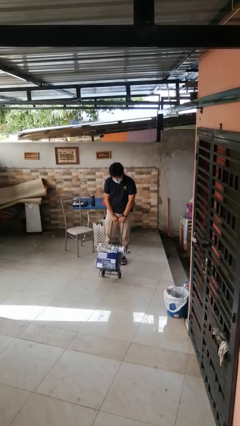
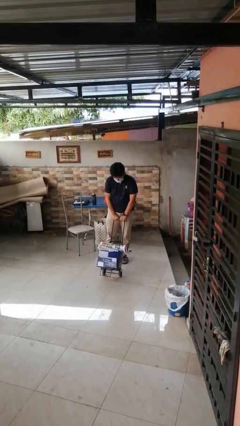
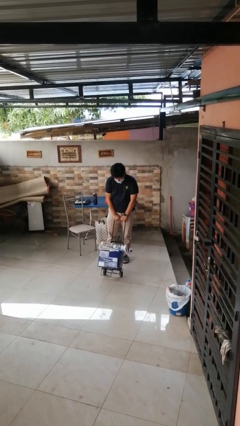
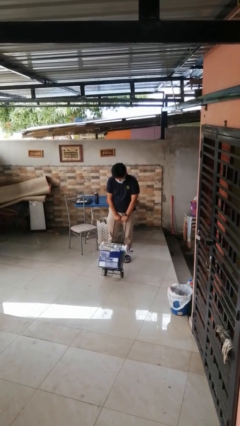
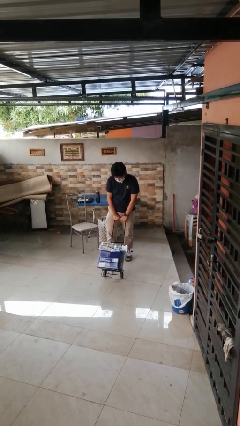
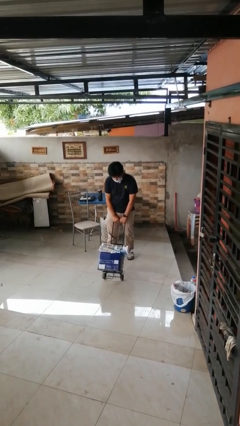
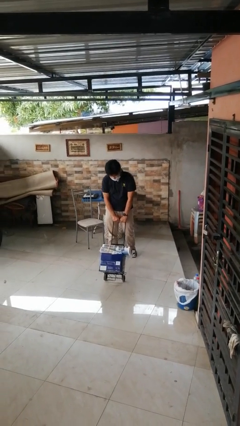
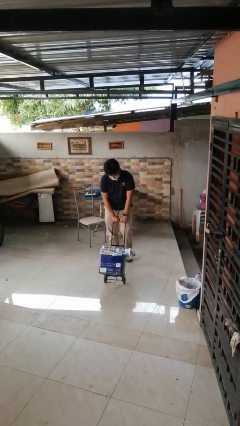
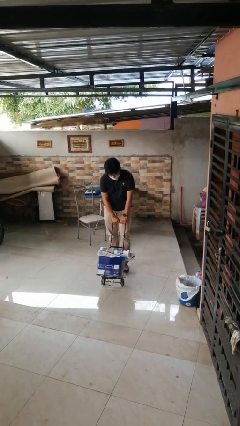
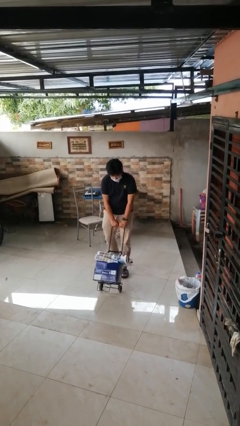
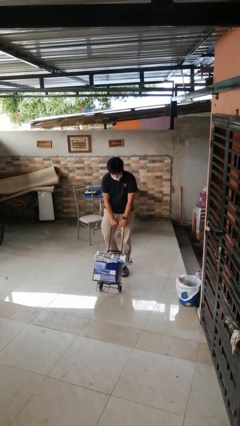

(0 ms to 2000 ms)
person pushes wheeled cart

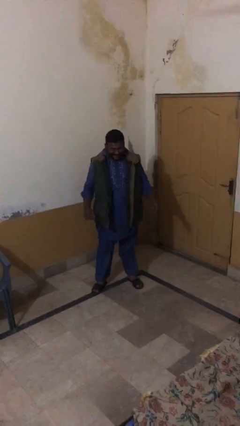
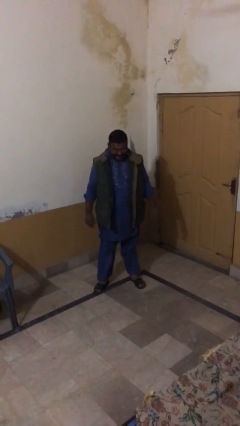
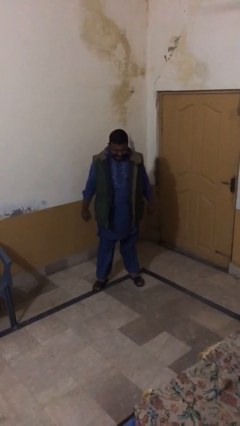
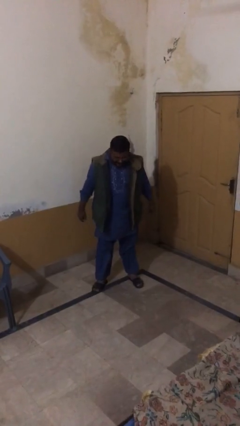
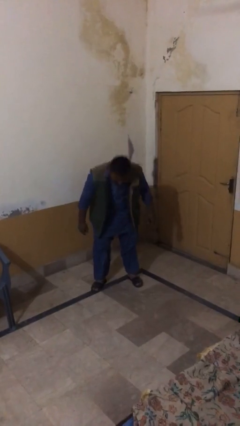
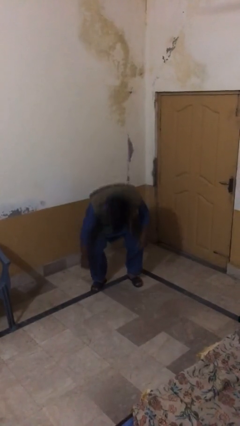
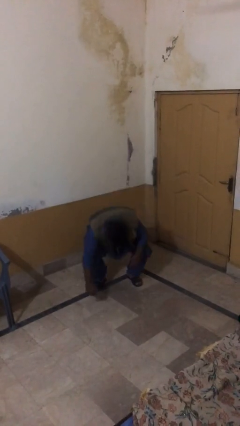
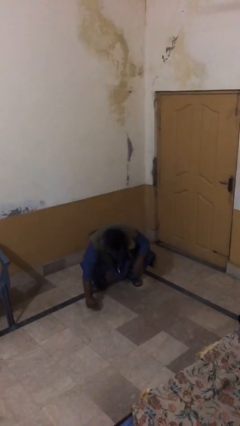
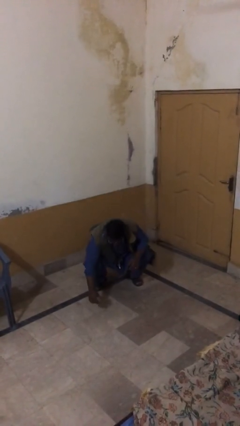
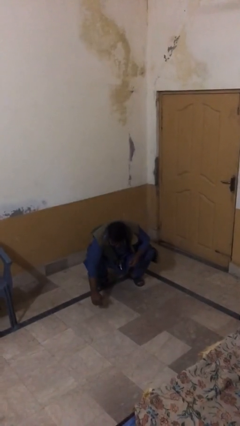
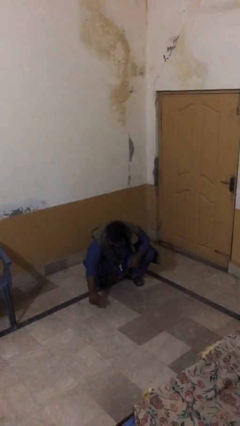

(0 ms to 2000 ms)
person sits down

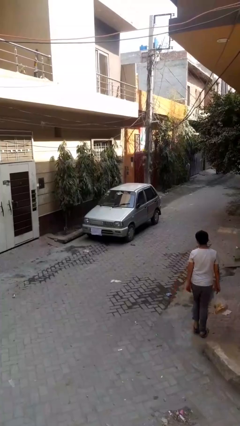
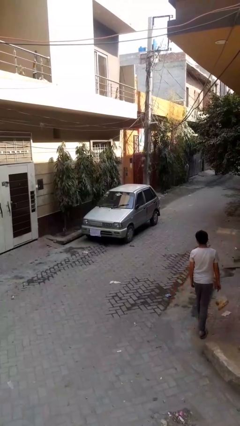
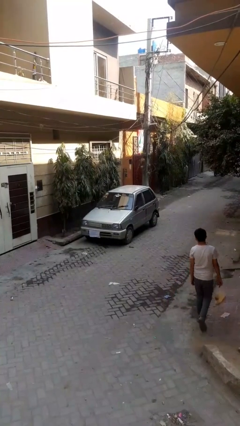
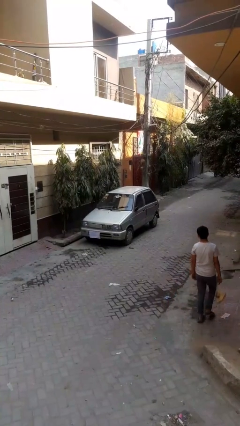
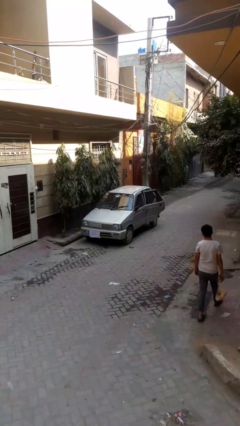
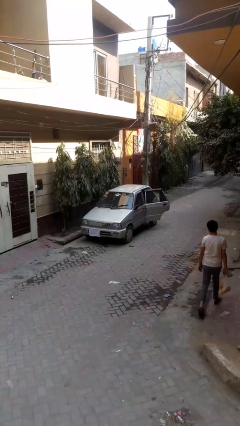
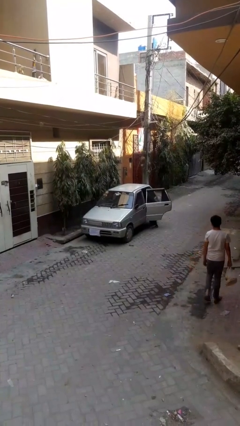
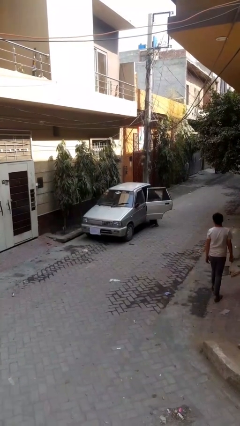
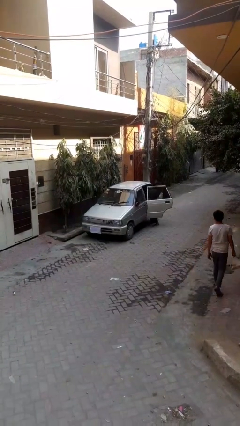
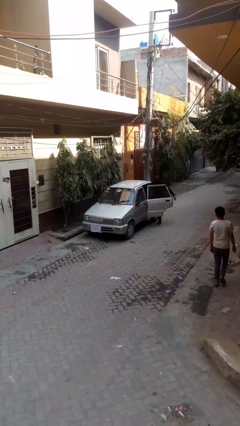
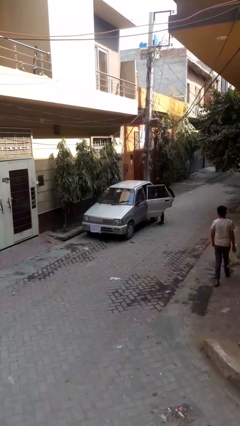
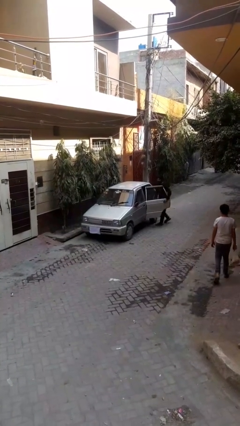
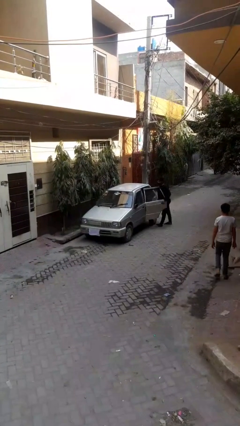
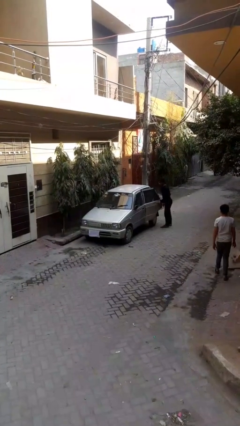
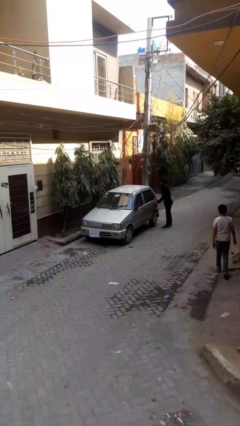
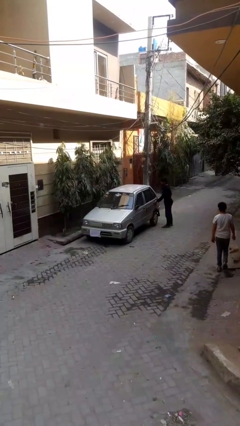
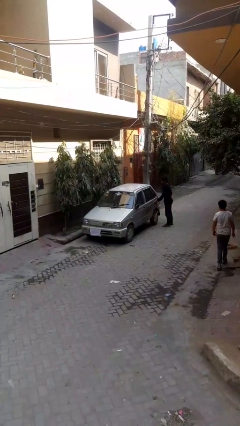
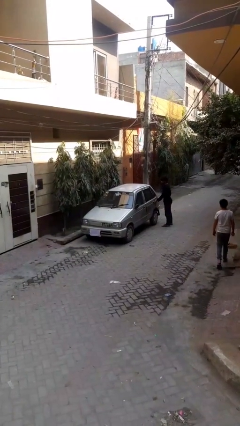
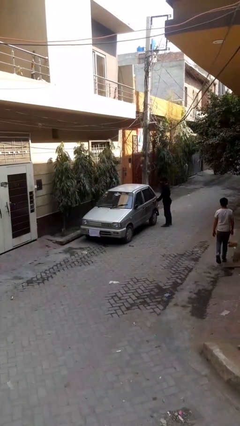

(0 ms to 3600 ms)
car drops off person

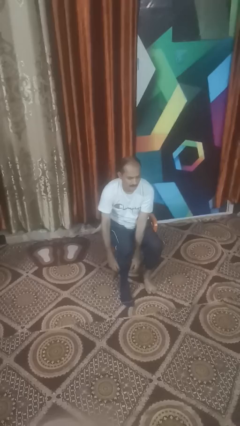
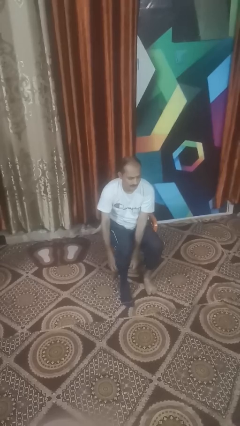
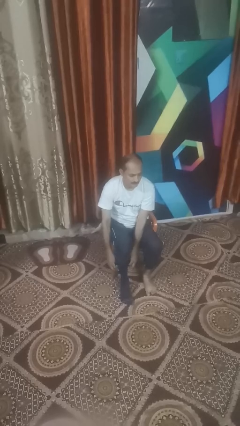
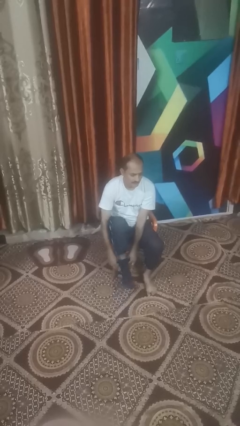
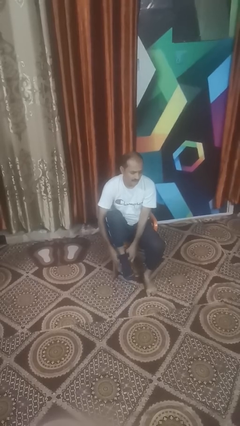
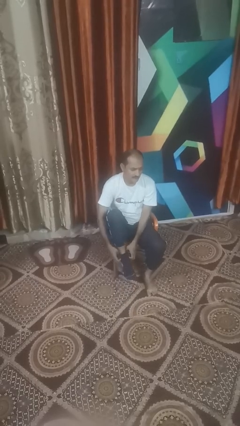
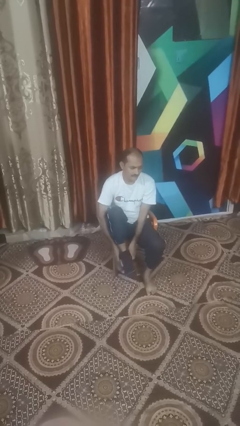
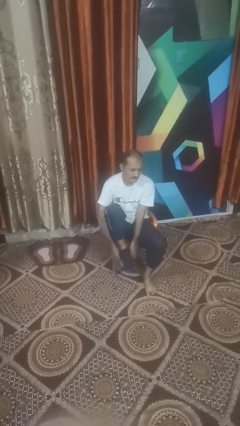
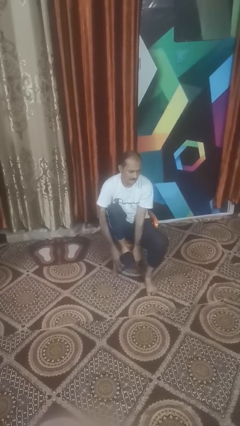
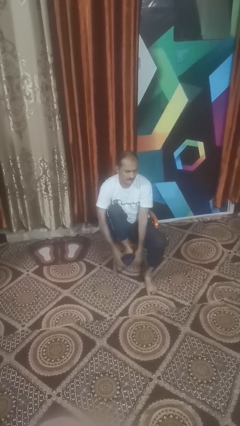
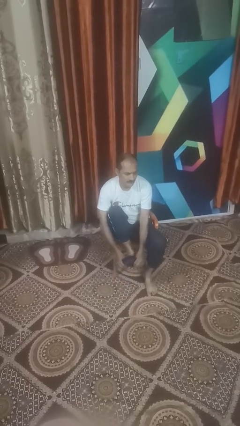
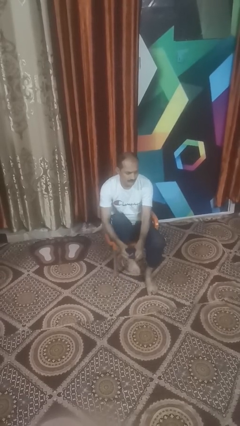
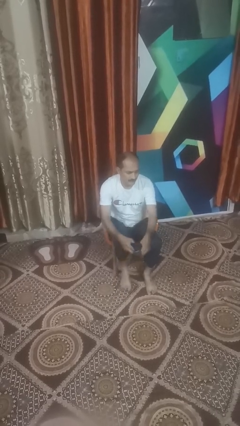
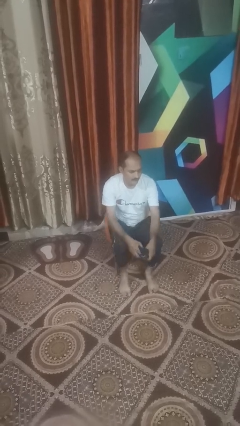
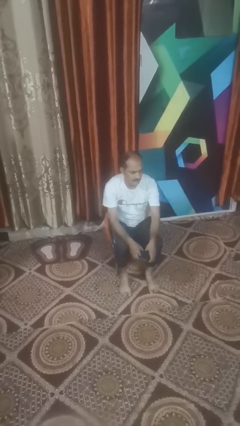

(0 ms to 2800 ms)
person takes off socks

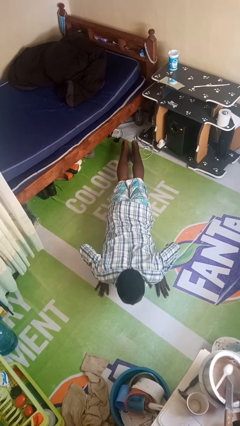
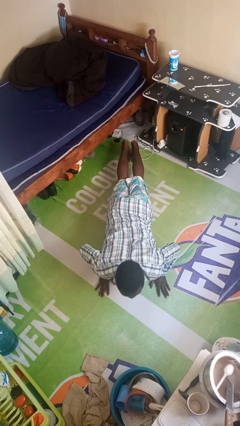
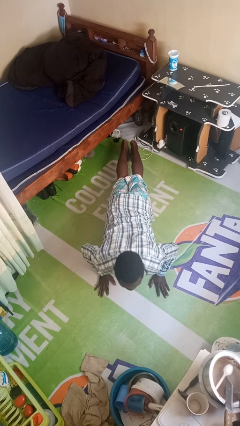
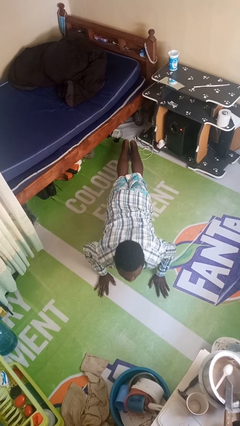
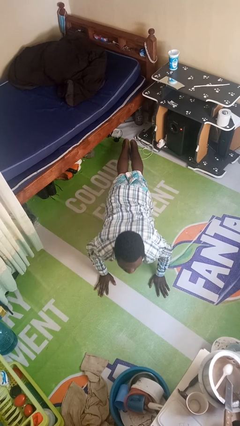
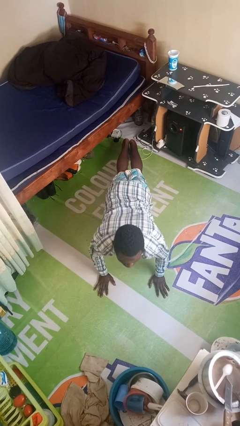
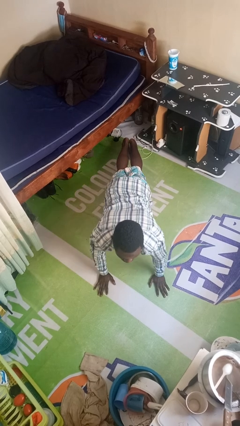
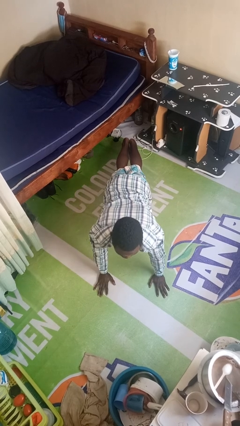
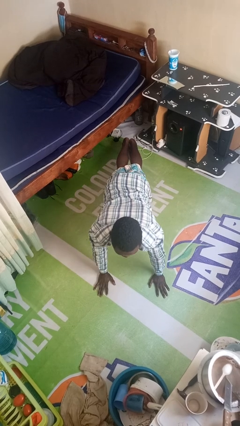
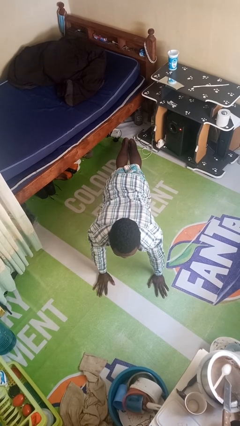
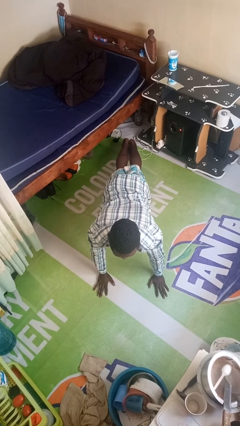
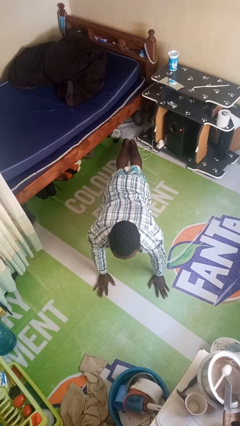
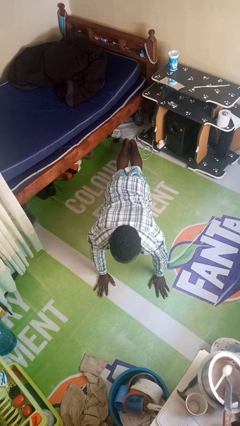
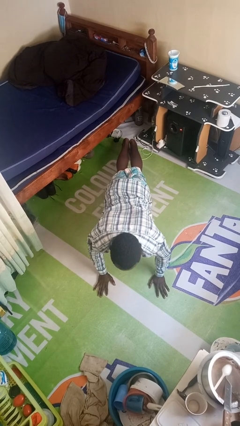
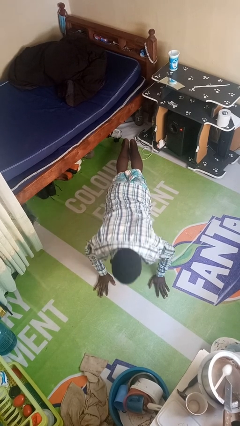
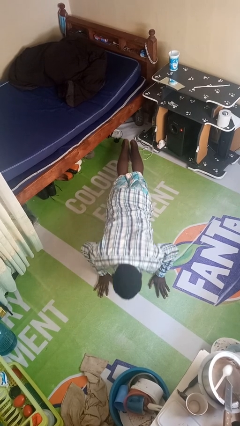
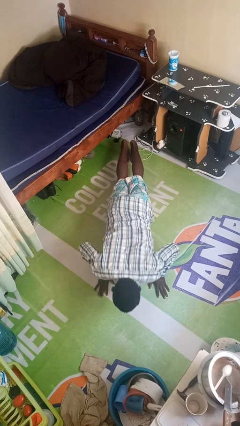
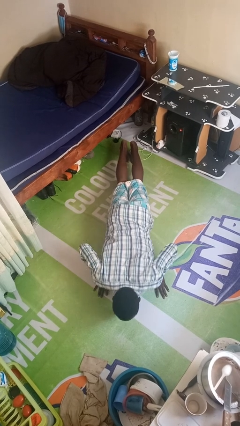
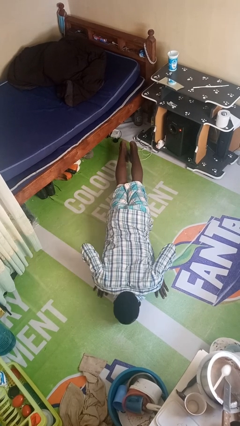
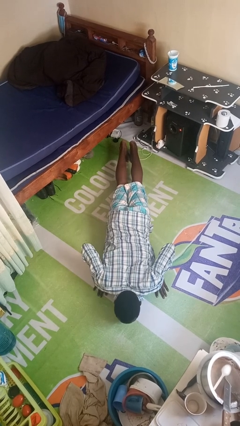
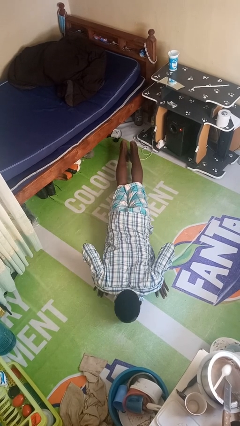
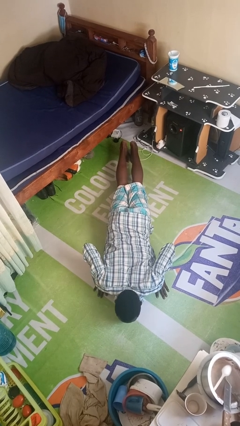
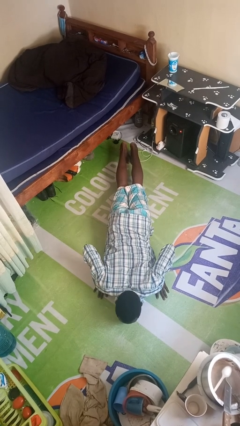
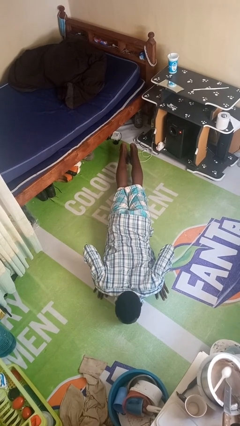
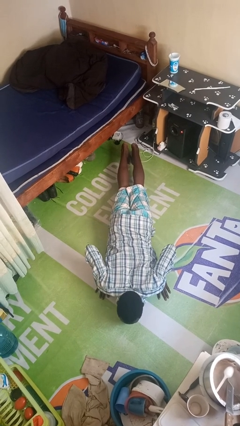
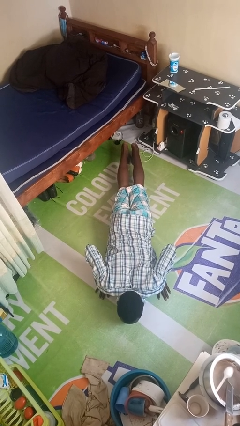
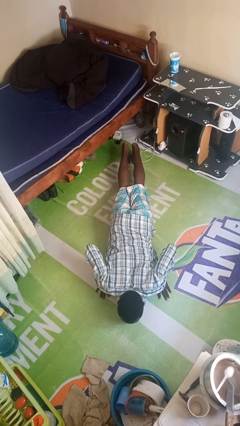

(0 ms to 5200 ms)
person exercises with pushup

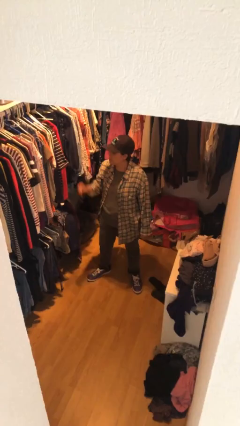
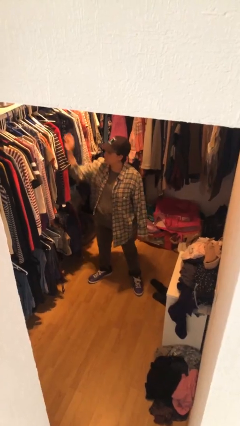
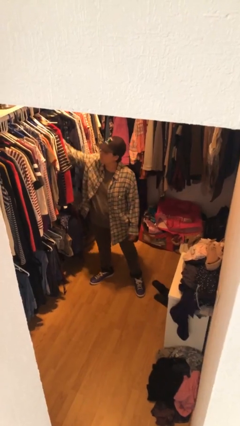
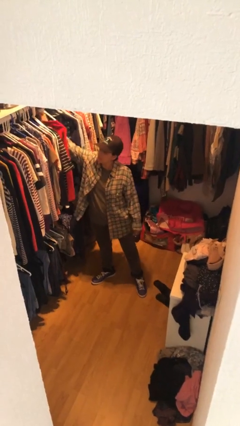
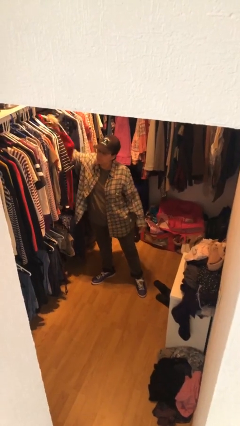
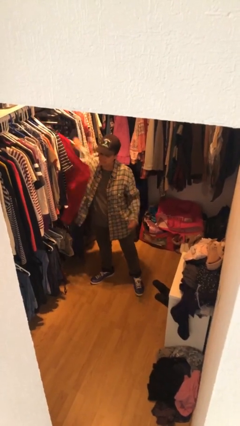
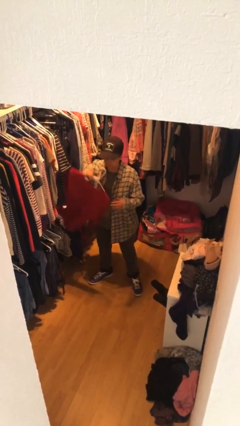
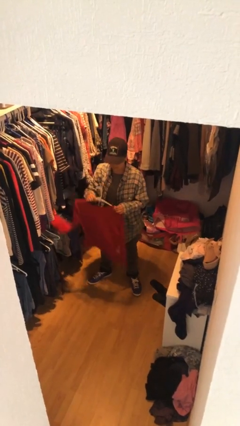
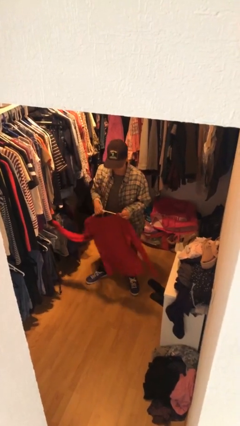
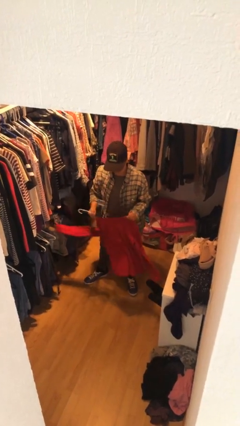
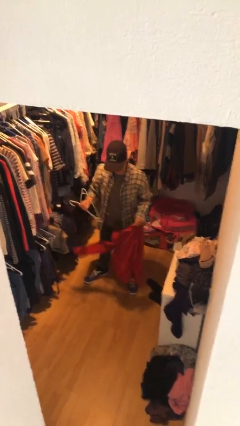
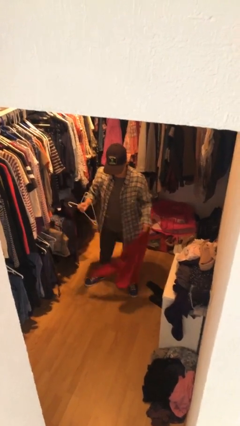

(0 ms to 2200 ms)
person takes clothes from closet
